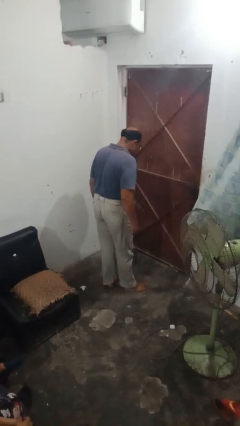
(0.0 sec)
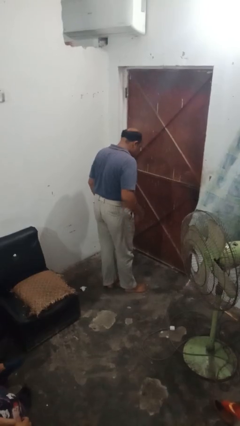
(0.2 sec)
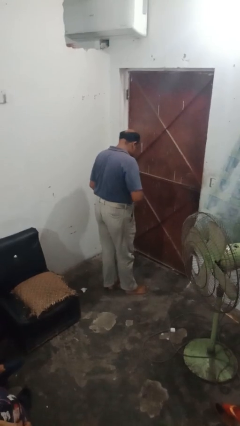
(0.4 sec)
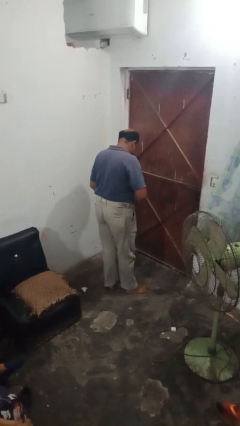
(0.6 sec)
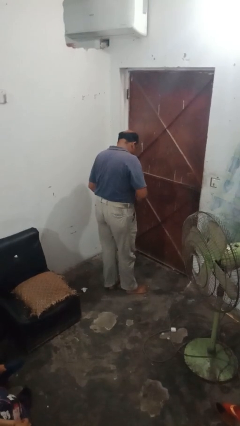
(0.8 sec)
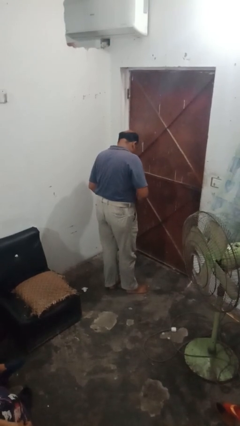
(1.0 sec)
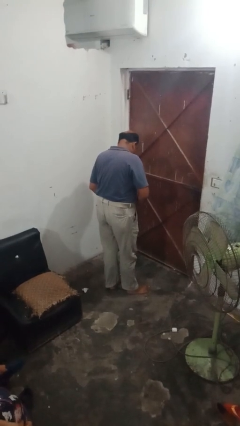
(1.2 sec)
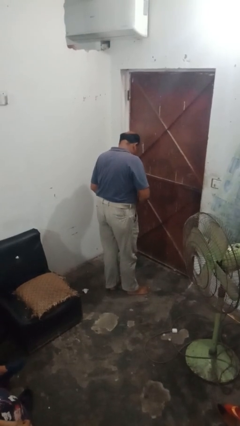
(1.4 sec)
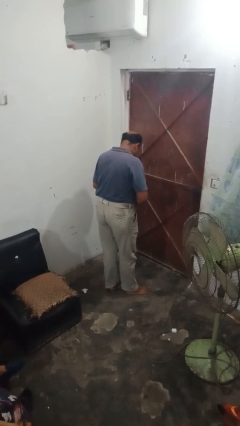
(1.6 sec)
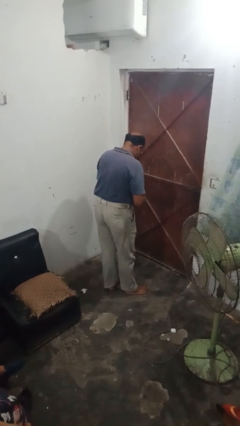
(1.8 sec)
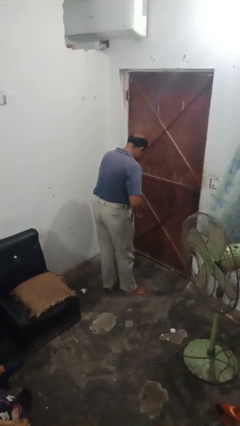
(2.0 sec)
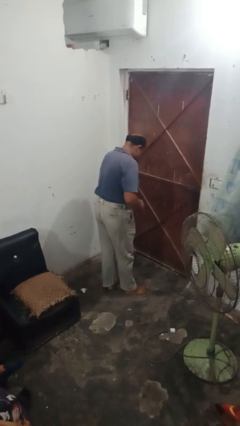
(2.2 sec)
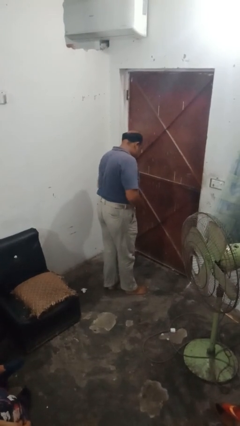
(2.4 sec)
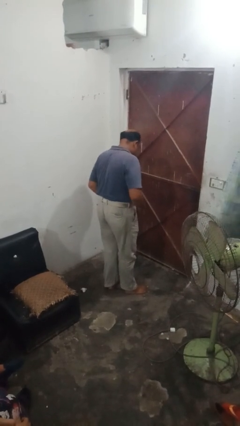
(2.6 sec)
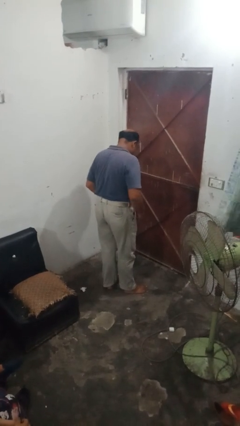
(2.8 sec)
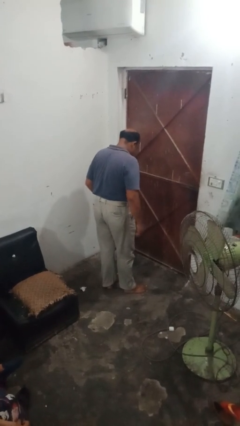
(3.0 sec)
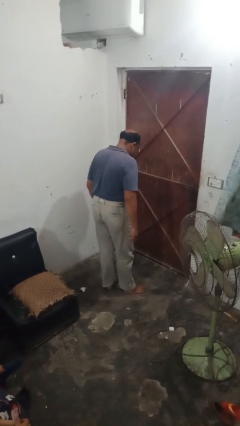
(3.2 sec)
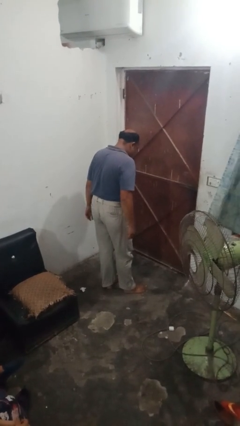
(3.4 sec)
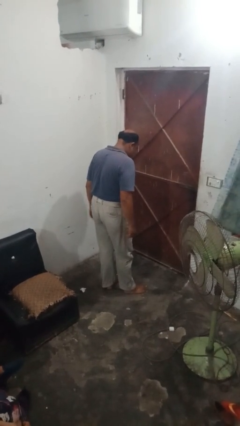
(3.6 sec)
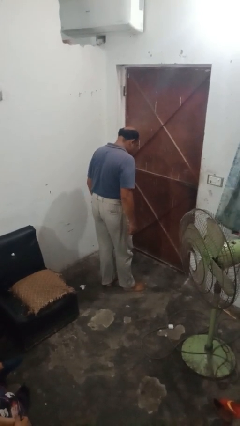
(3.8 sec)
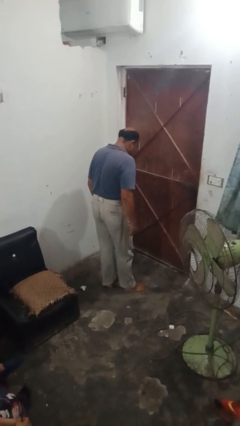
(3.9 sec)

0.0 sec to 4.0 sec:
person puts on belt

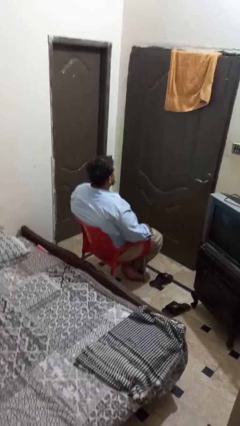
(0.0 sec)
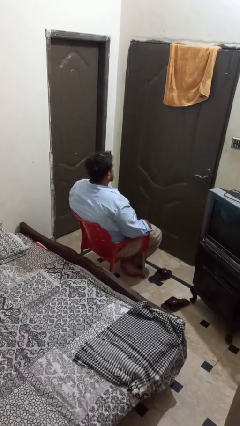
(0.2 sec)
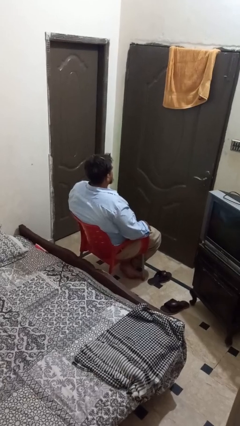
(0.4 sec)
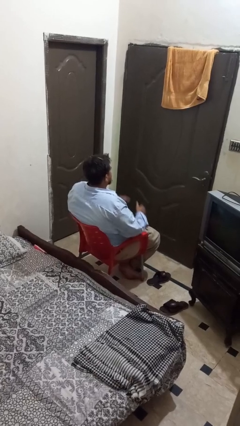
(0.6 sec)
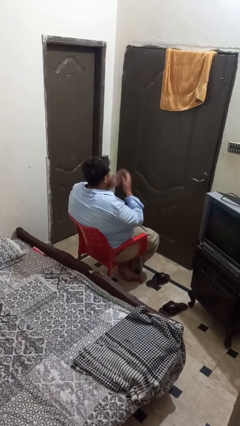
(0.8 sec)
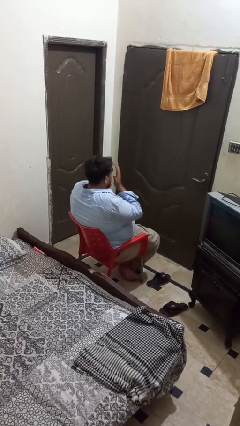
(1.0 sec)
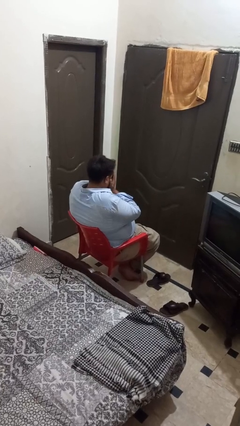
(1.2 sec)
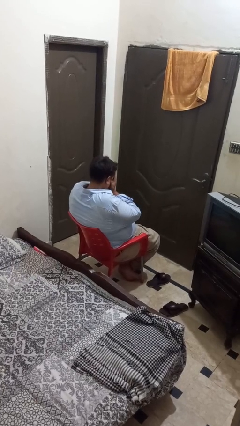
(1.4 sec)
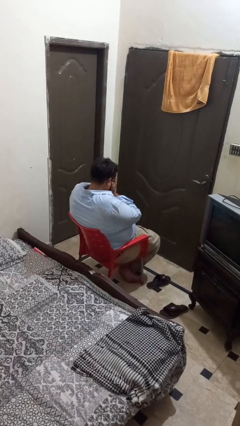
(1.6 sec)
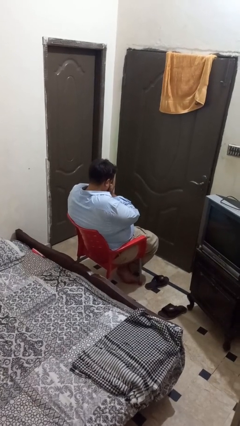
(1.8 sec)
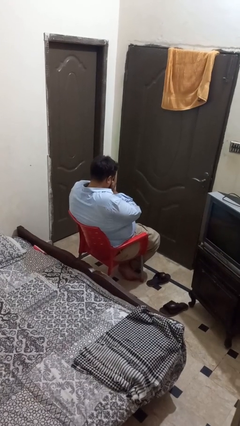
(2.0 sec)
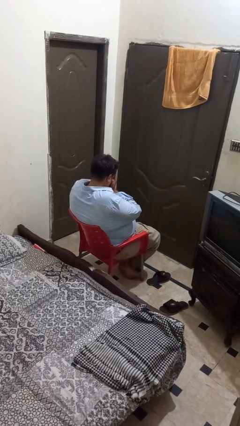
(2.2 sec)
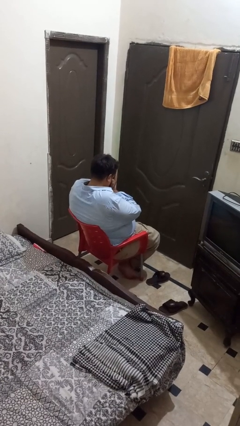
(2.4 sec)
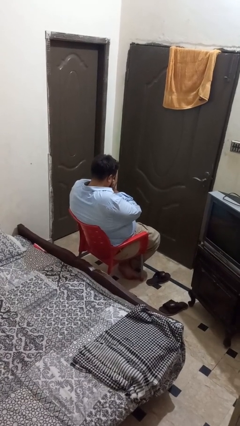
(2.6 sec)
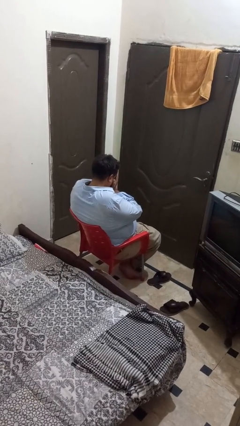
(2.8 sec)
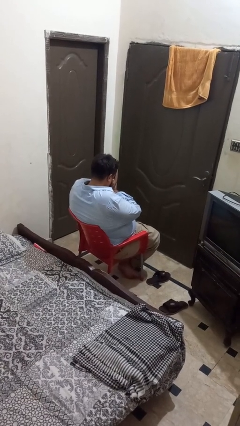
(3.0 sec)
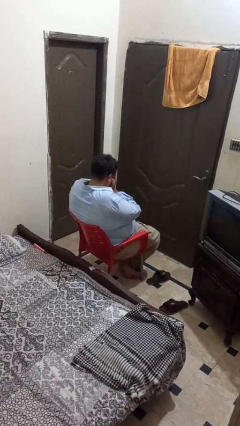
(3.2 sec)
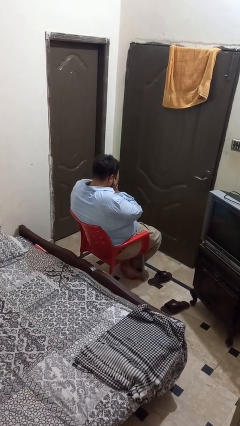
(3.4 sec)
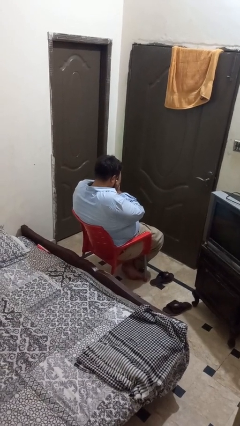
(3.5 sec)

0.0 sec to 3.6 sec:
person covers face with hands

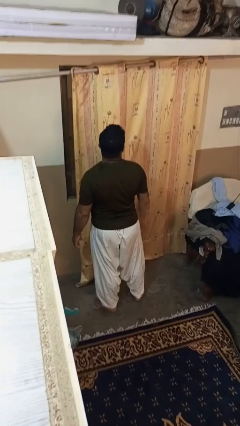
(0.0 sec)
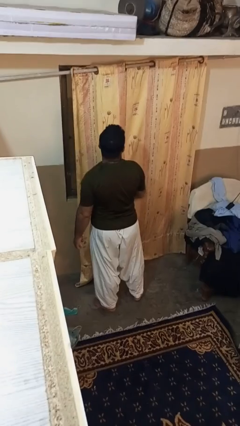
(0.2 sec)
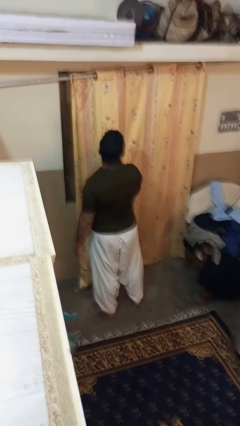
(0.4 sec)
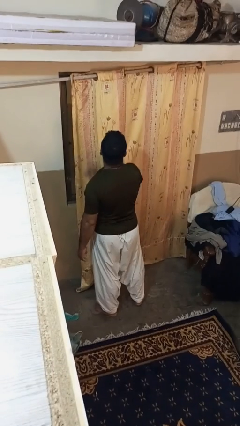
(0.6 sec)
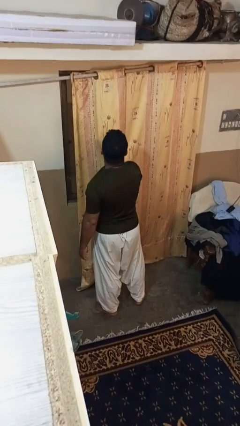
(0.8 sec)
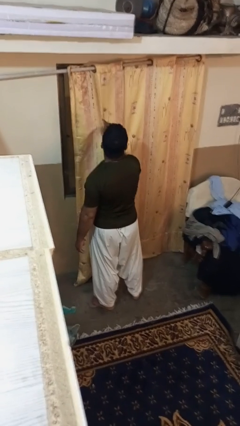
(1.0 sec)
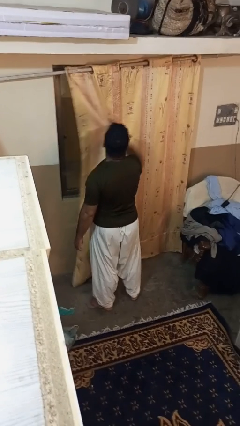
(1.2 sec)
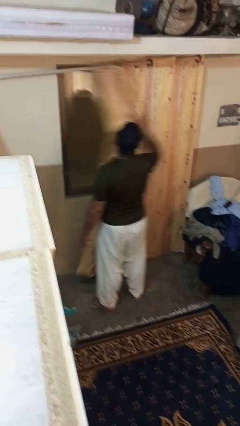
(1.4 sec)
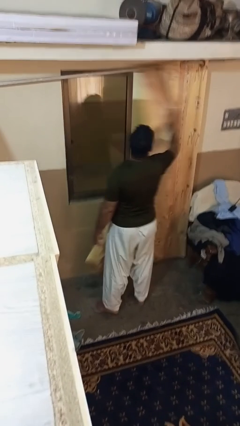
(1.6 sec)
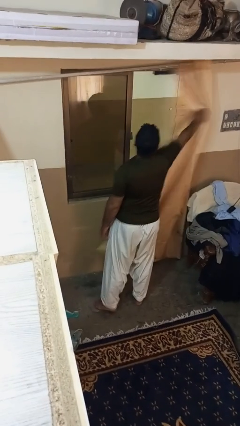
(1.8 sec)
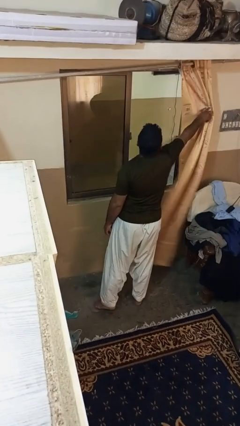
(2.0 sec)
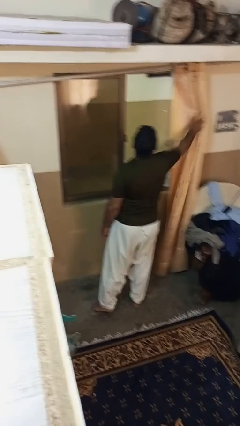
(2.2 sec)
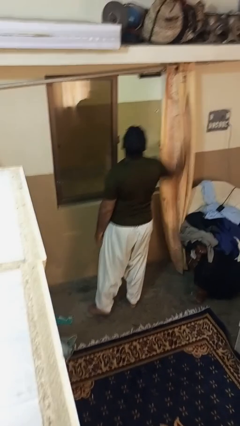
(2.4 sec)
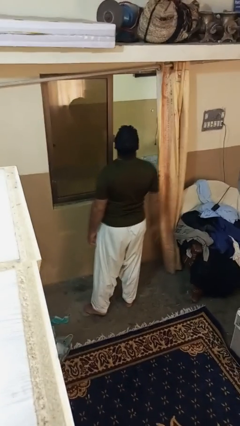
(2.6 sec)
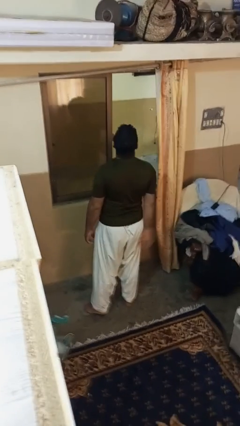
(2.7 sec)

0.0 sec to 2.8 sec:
person opens curtains

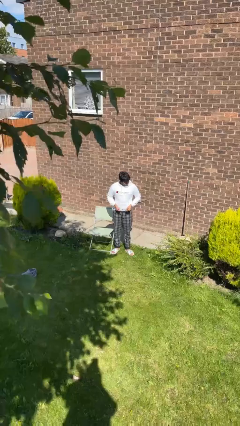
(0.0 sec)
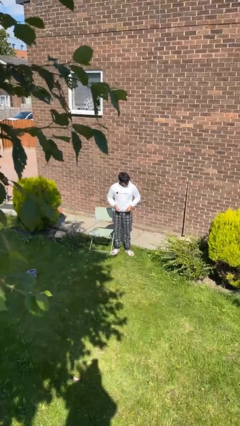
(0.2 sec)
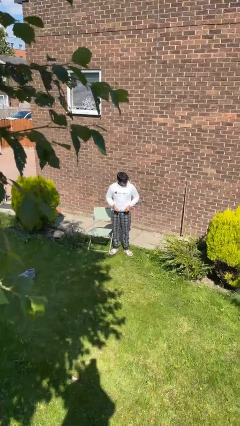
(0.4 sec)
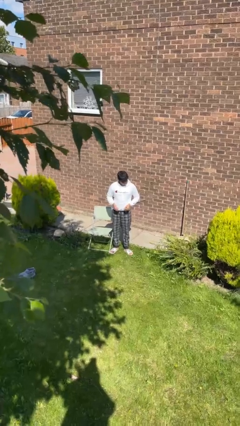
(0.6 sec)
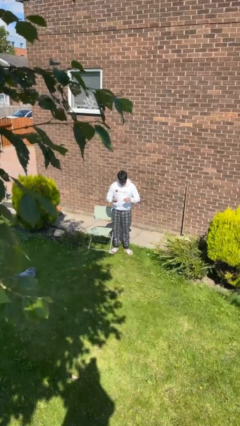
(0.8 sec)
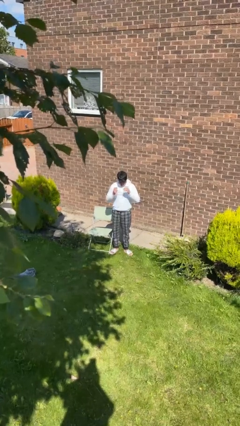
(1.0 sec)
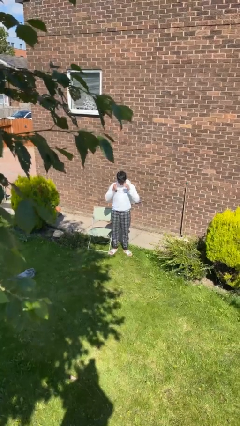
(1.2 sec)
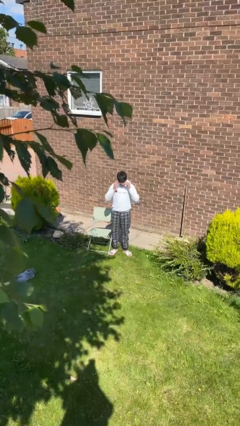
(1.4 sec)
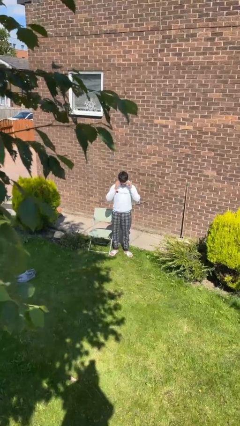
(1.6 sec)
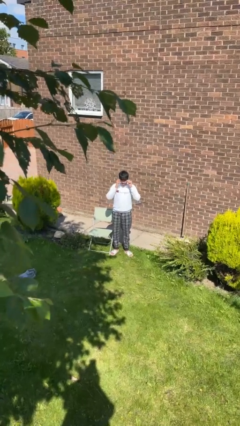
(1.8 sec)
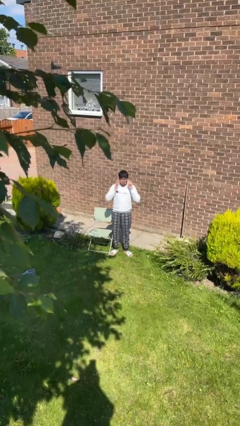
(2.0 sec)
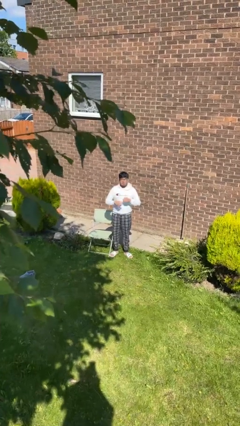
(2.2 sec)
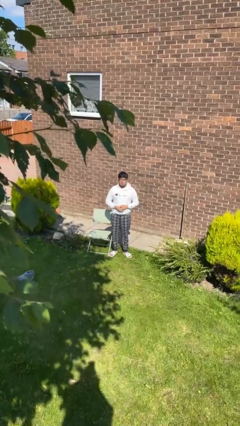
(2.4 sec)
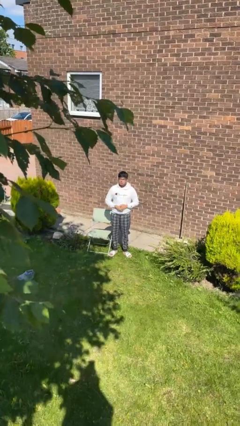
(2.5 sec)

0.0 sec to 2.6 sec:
person puts on glasses

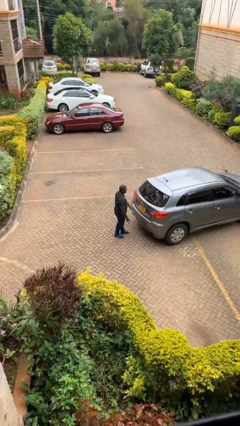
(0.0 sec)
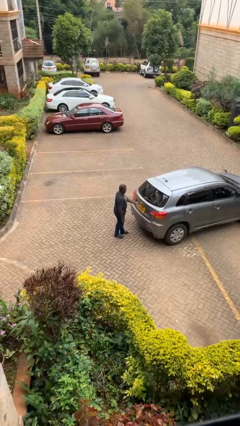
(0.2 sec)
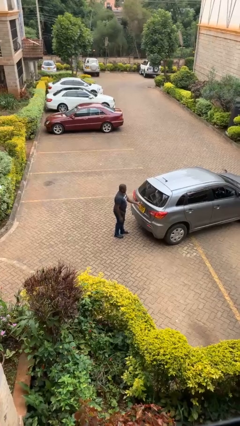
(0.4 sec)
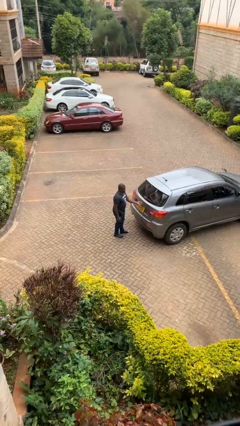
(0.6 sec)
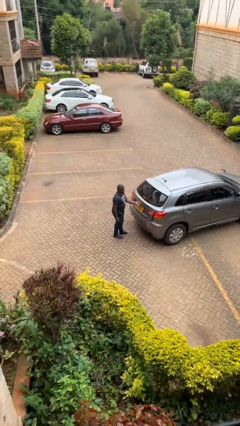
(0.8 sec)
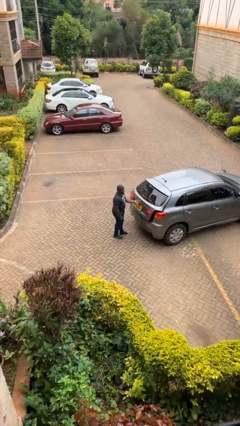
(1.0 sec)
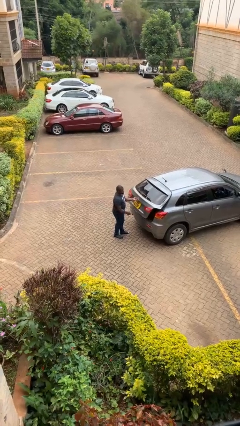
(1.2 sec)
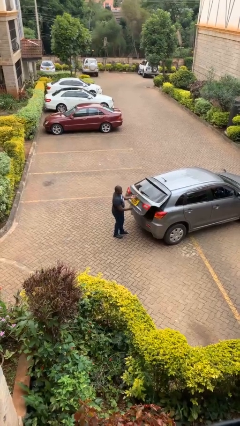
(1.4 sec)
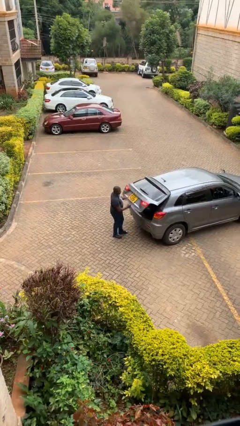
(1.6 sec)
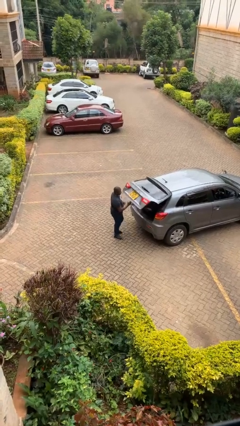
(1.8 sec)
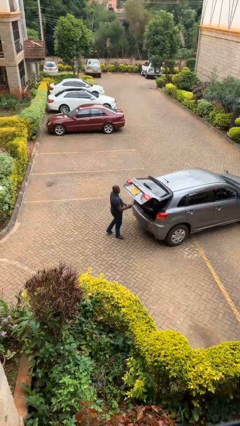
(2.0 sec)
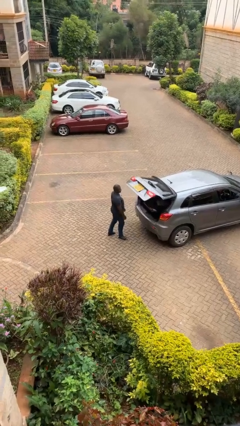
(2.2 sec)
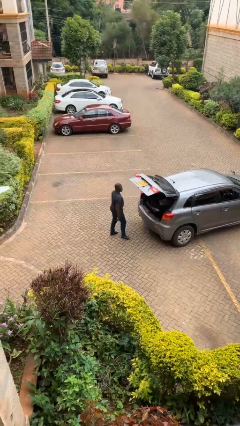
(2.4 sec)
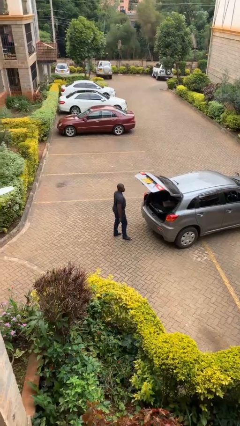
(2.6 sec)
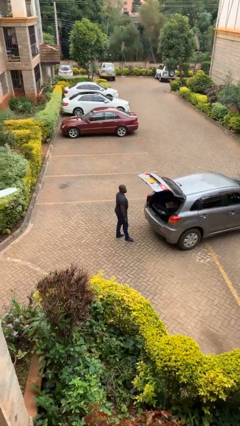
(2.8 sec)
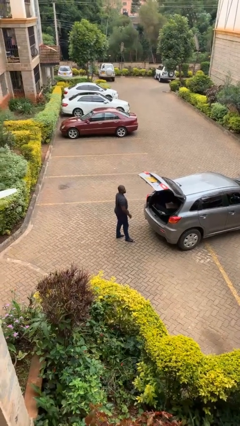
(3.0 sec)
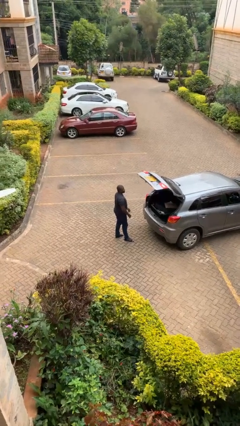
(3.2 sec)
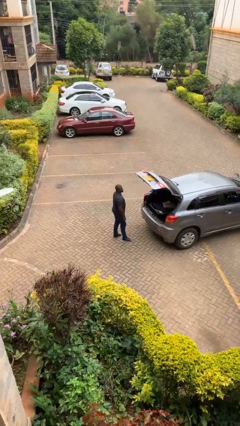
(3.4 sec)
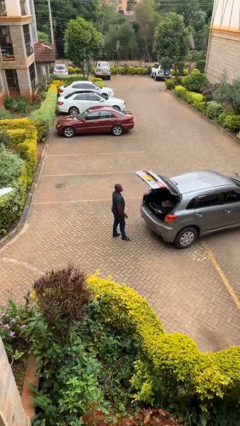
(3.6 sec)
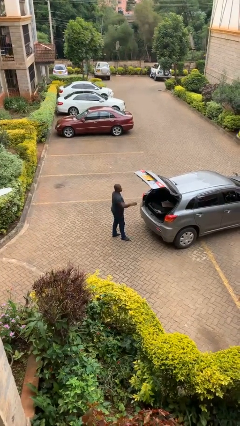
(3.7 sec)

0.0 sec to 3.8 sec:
person opens car trunk

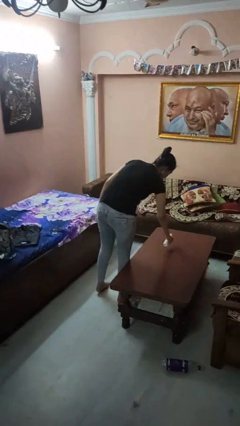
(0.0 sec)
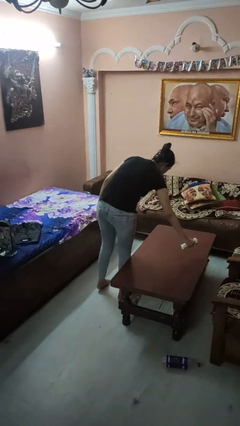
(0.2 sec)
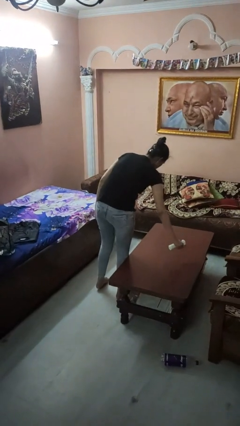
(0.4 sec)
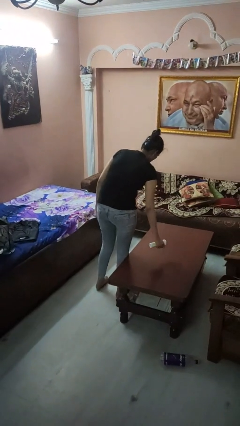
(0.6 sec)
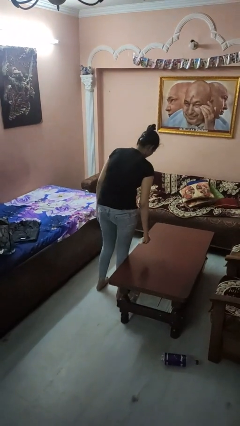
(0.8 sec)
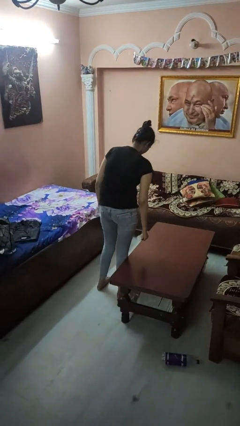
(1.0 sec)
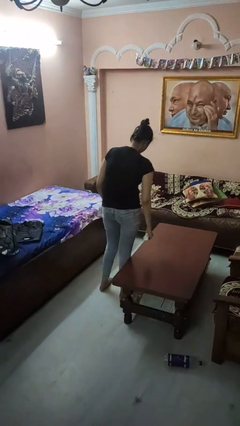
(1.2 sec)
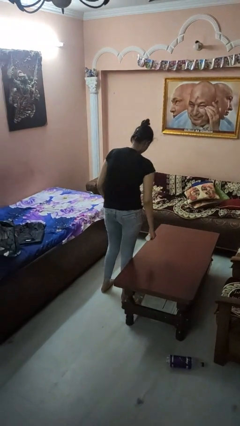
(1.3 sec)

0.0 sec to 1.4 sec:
person sprays from bottle
